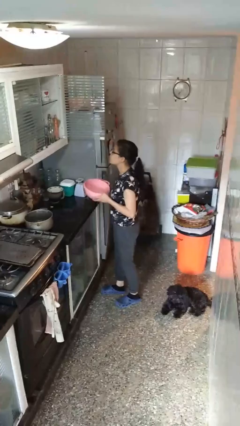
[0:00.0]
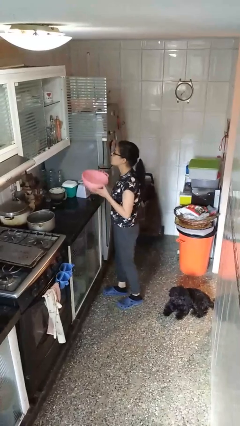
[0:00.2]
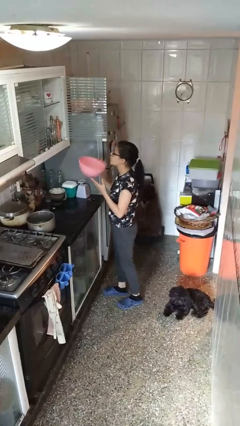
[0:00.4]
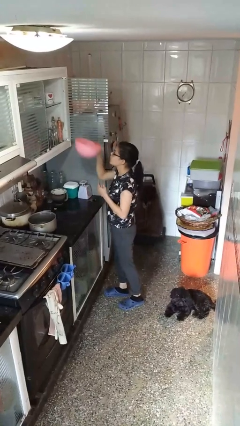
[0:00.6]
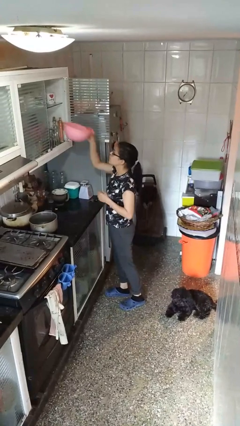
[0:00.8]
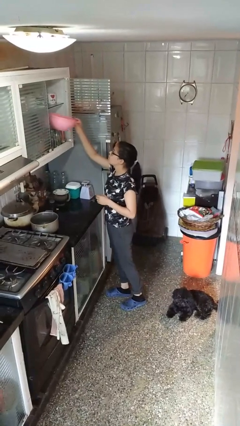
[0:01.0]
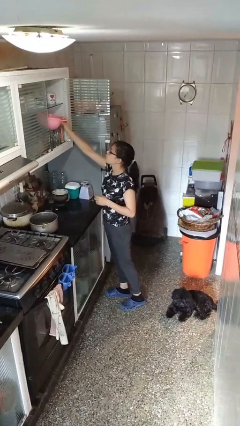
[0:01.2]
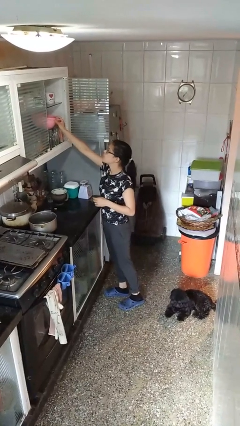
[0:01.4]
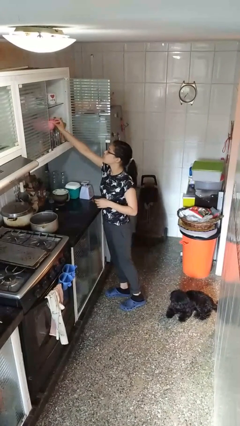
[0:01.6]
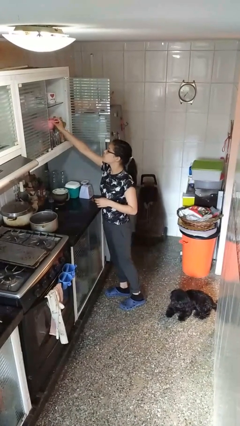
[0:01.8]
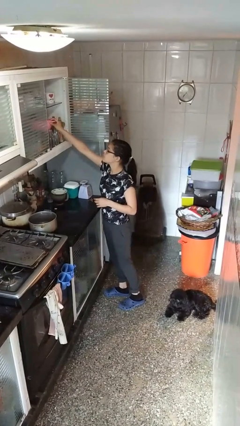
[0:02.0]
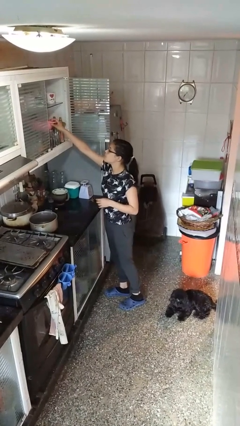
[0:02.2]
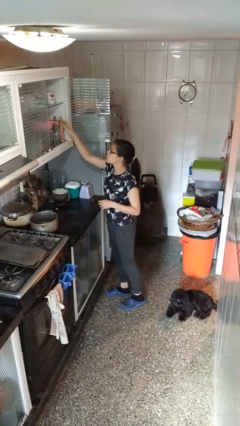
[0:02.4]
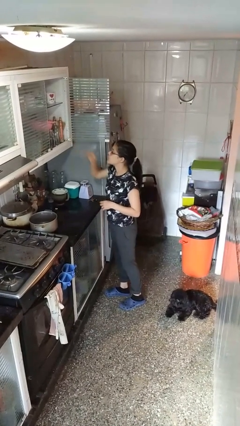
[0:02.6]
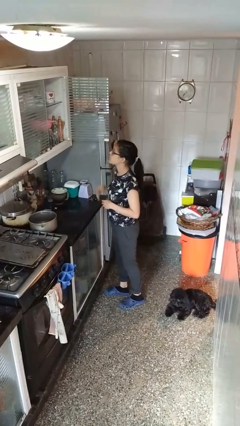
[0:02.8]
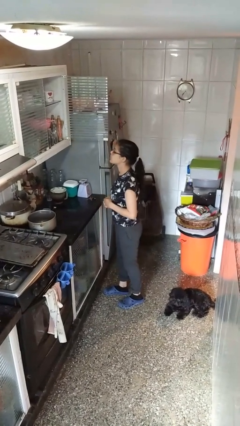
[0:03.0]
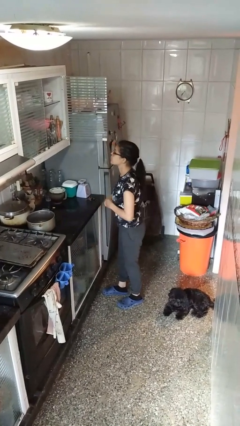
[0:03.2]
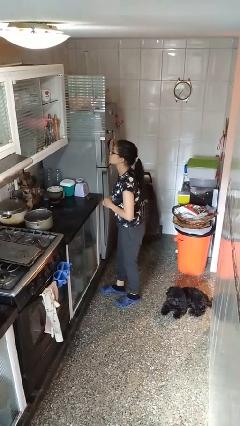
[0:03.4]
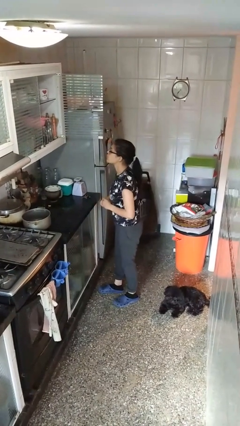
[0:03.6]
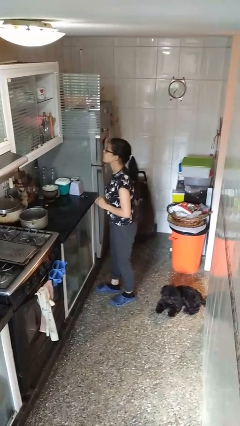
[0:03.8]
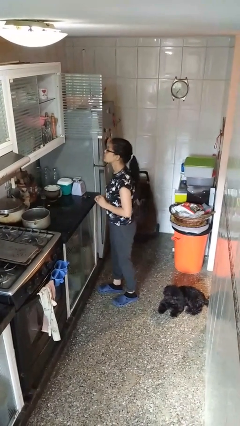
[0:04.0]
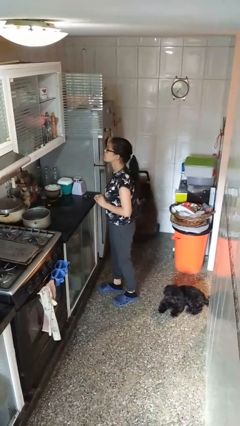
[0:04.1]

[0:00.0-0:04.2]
person puts down object into cabinet

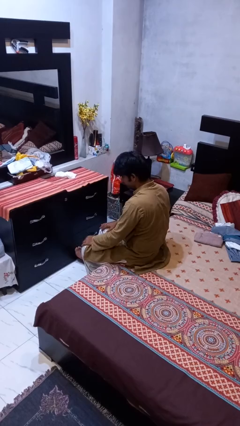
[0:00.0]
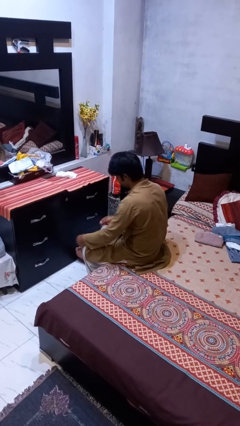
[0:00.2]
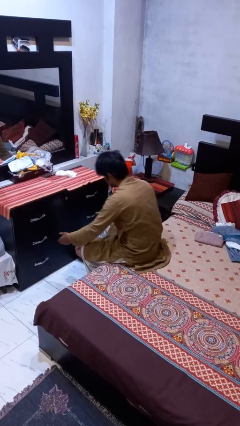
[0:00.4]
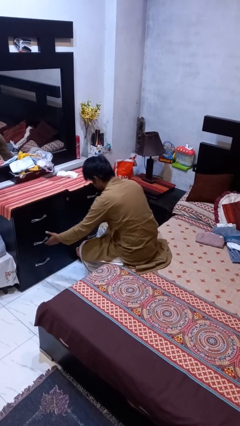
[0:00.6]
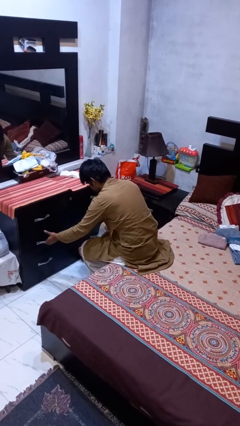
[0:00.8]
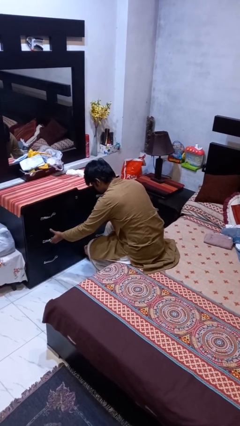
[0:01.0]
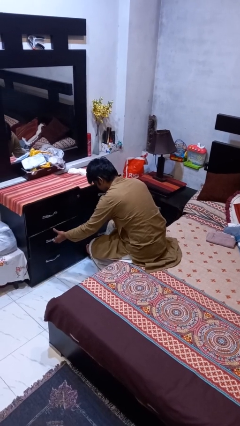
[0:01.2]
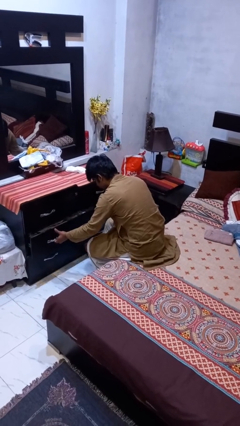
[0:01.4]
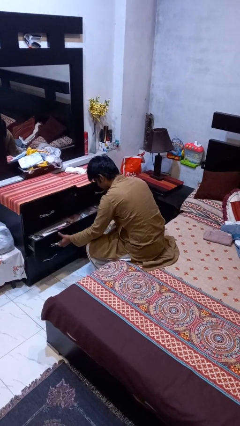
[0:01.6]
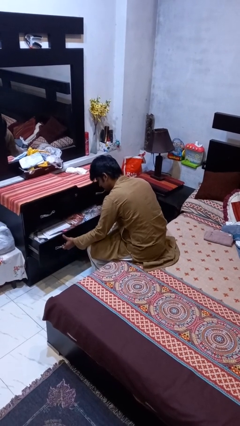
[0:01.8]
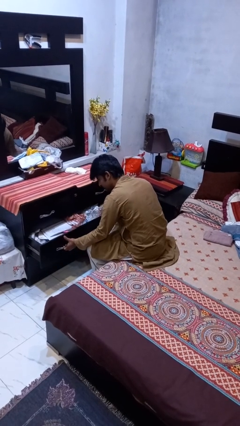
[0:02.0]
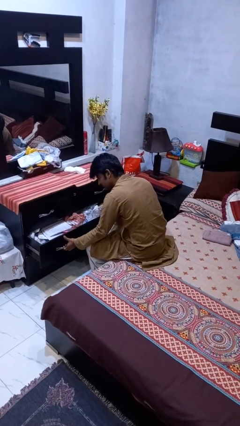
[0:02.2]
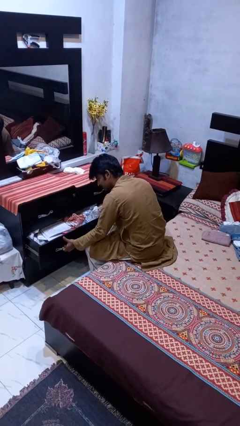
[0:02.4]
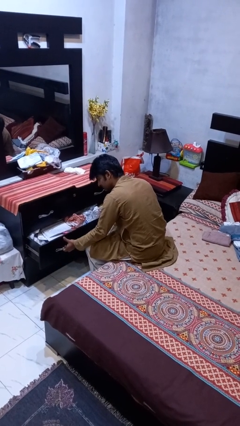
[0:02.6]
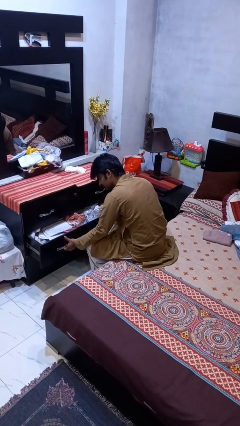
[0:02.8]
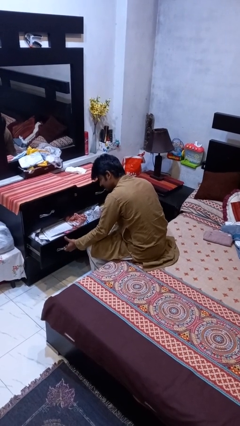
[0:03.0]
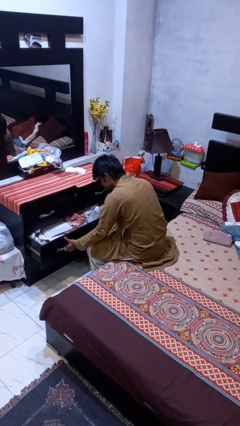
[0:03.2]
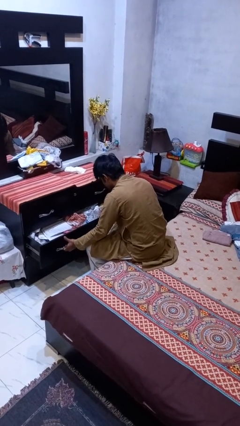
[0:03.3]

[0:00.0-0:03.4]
person opens dresser drawer

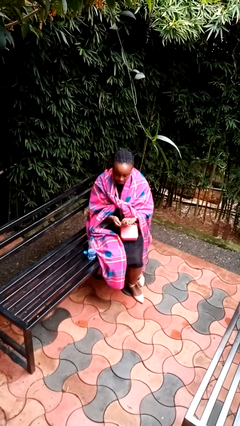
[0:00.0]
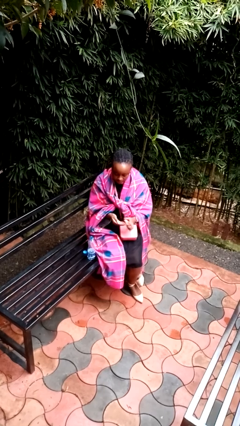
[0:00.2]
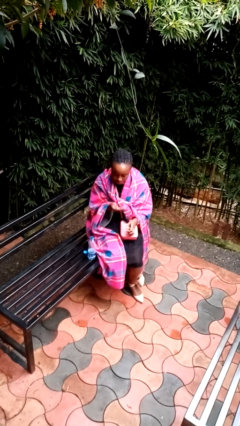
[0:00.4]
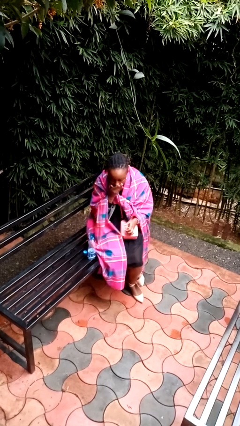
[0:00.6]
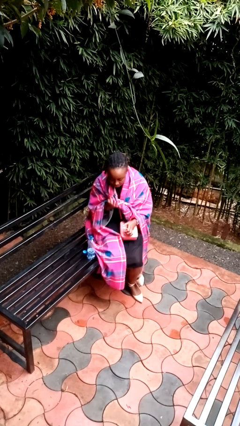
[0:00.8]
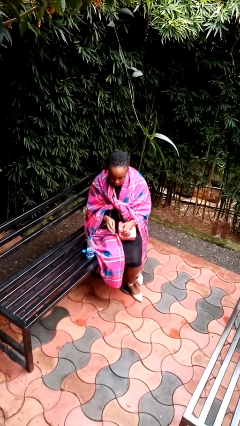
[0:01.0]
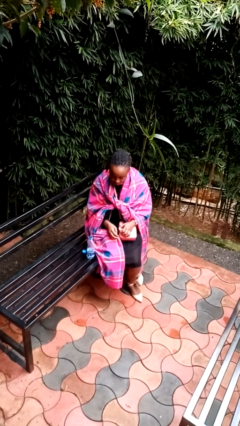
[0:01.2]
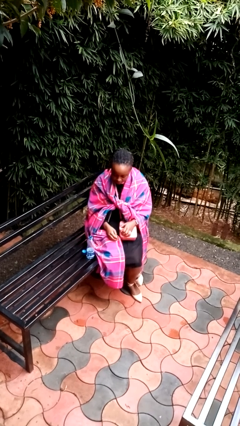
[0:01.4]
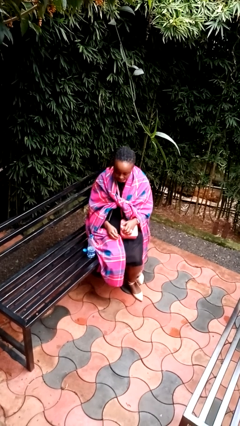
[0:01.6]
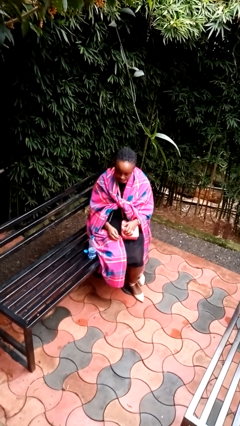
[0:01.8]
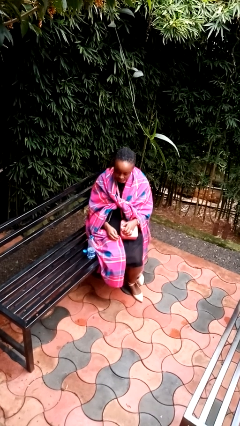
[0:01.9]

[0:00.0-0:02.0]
person takes medicine pills

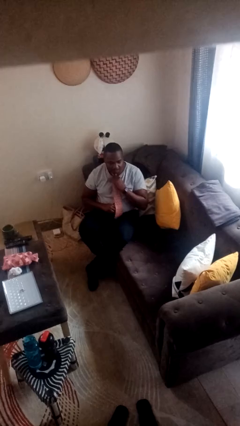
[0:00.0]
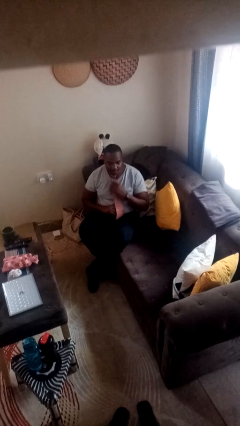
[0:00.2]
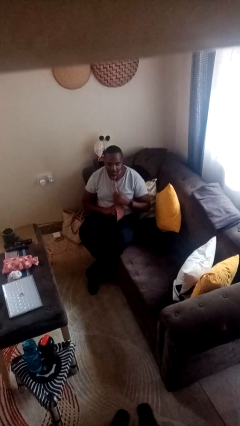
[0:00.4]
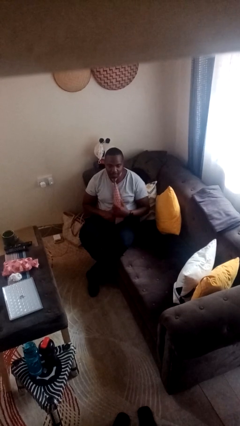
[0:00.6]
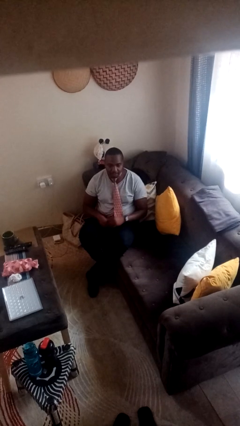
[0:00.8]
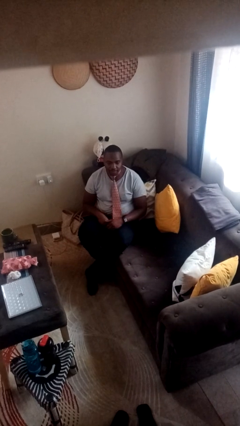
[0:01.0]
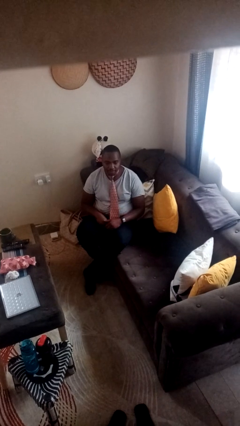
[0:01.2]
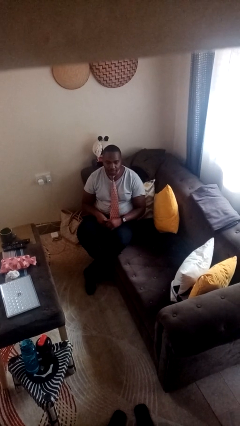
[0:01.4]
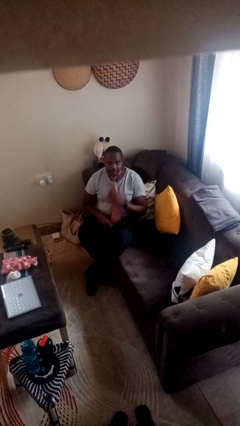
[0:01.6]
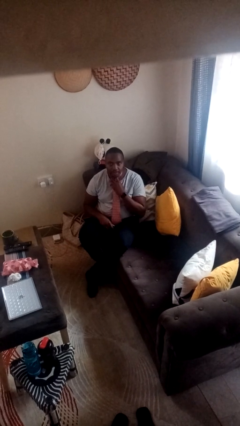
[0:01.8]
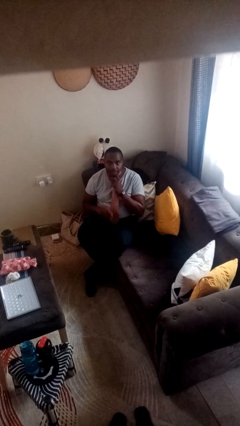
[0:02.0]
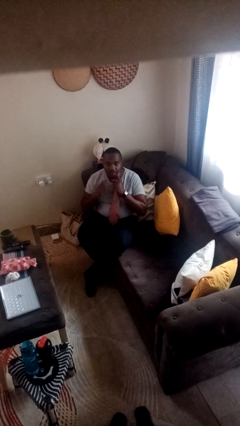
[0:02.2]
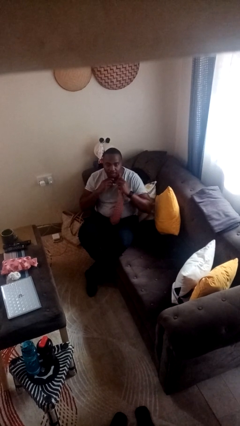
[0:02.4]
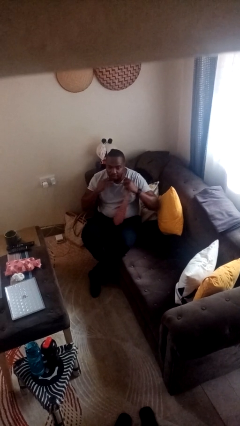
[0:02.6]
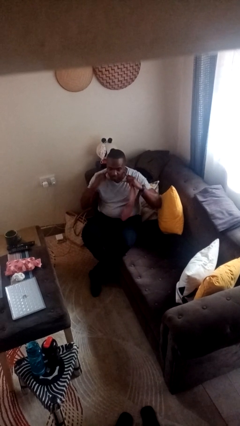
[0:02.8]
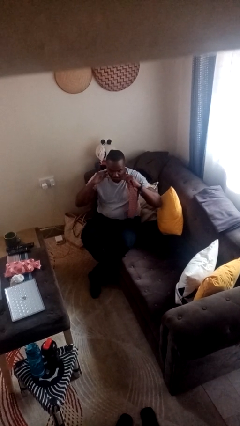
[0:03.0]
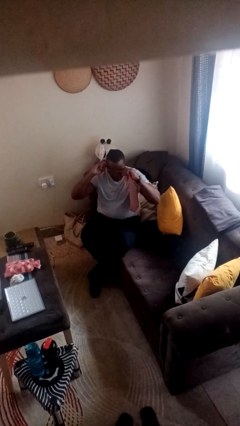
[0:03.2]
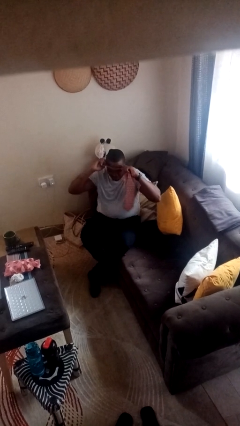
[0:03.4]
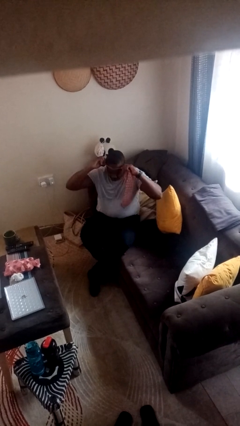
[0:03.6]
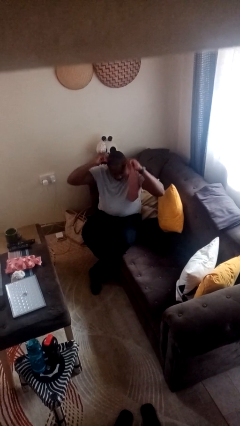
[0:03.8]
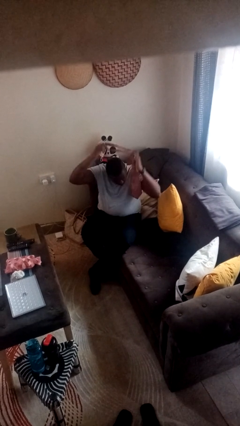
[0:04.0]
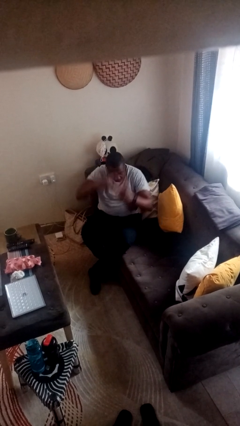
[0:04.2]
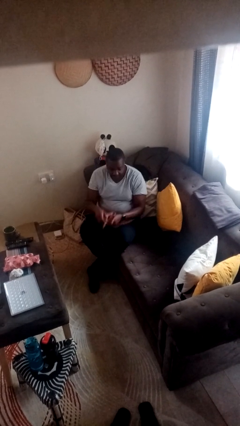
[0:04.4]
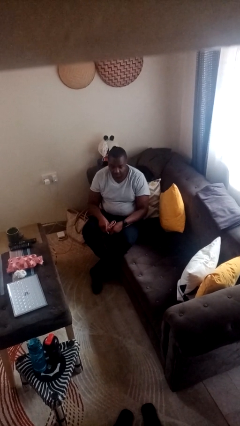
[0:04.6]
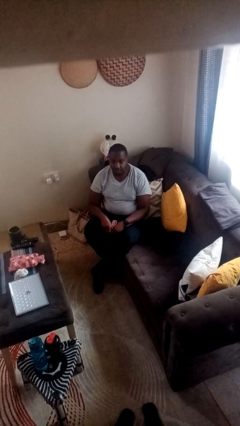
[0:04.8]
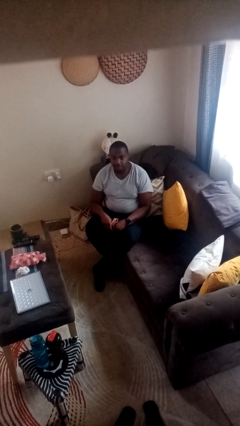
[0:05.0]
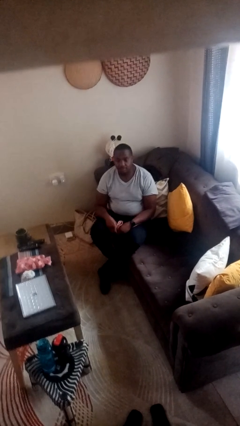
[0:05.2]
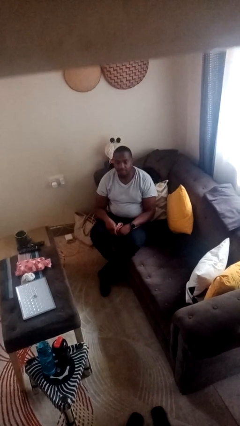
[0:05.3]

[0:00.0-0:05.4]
person takes off necktie

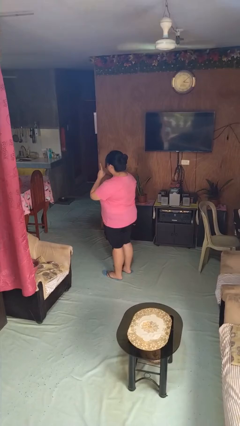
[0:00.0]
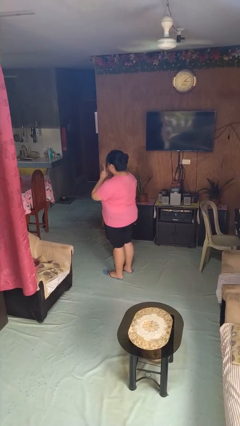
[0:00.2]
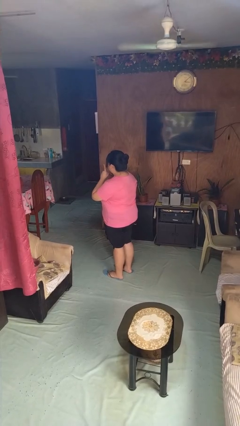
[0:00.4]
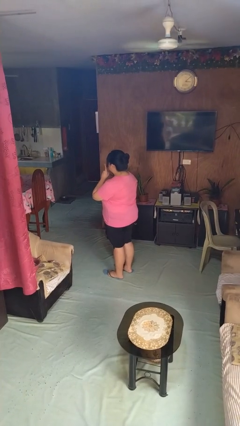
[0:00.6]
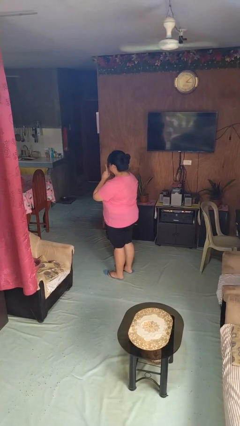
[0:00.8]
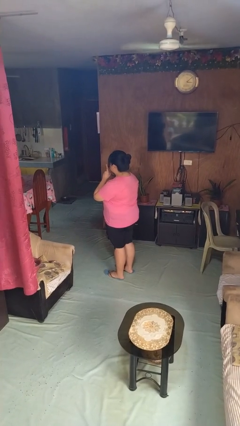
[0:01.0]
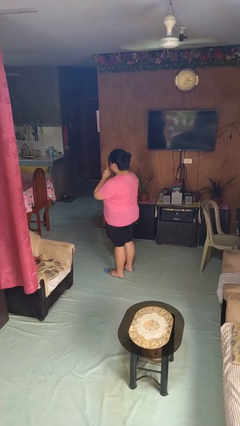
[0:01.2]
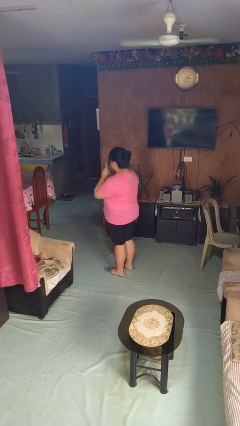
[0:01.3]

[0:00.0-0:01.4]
person gestures be quiet

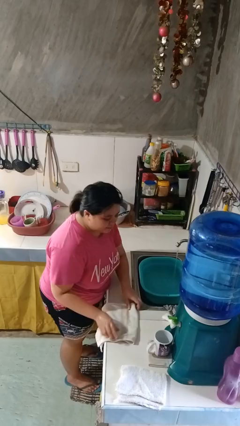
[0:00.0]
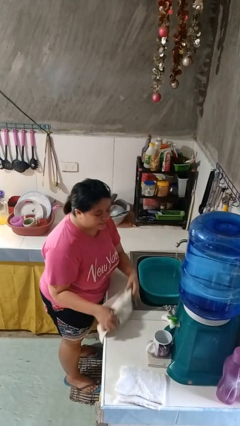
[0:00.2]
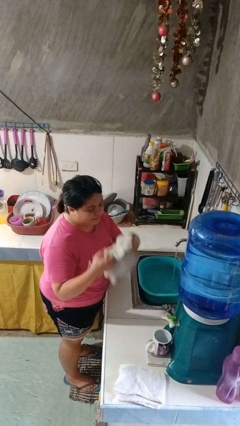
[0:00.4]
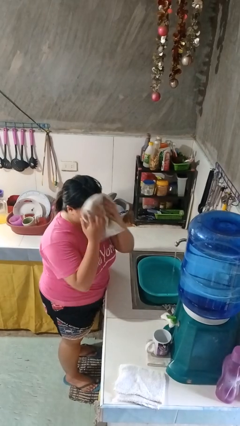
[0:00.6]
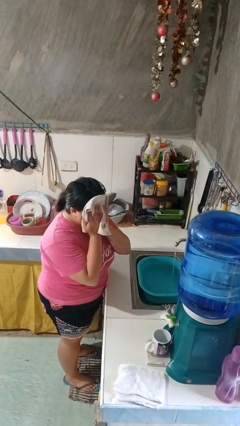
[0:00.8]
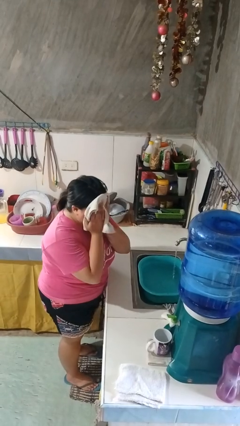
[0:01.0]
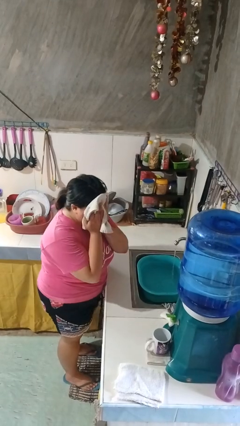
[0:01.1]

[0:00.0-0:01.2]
person dries face with towel
